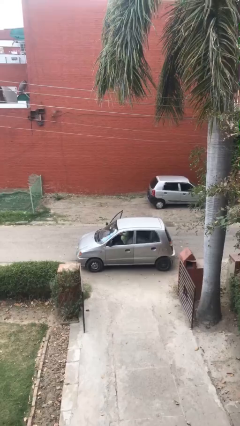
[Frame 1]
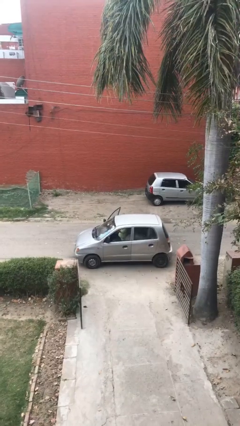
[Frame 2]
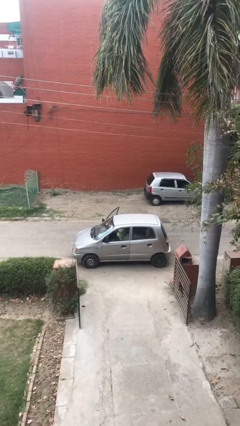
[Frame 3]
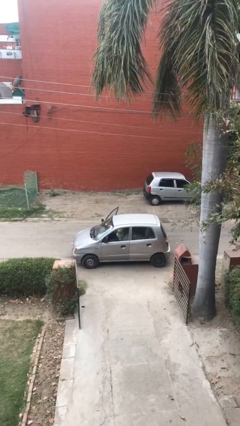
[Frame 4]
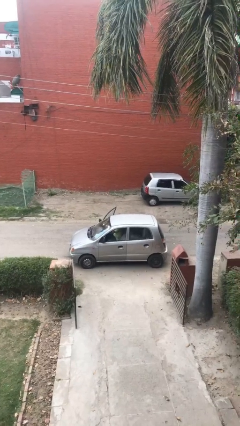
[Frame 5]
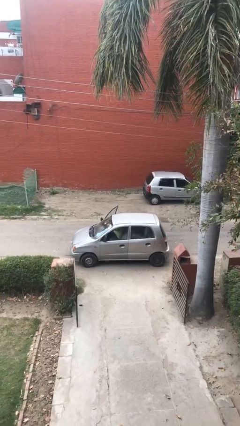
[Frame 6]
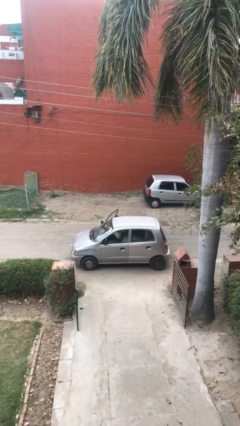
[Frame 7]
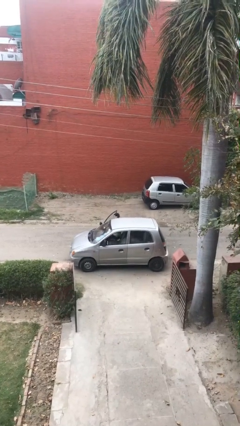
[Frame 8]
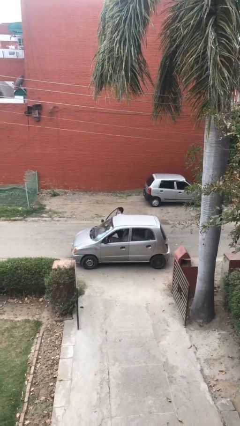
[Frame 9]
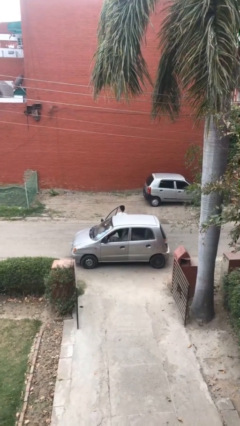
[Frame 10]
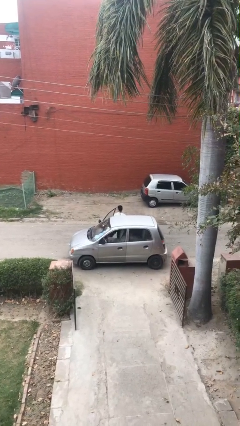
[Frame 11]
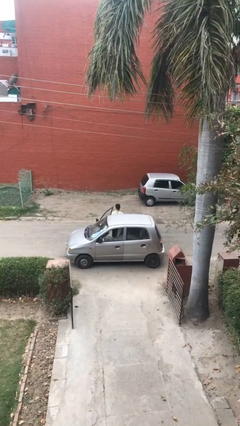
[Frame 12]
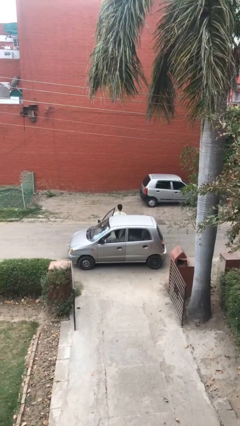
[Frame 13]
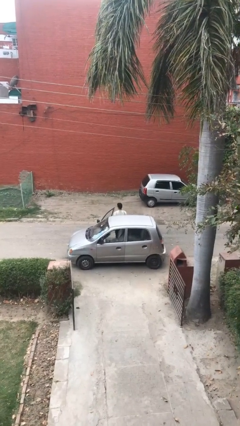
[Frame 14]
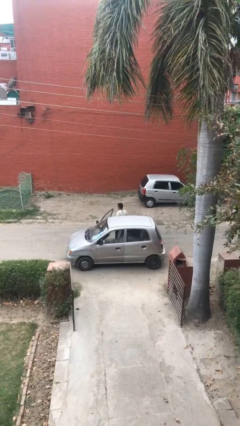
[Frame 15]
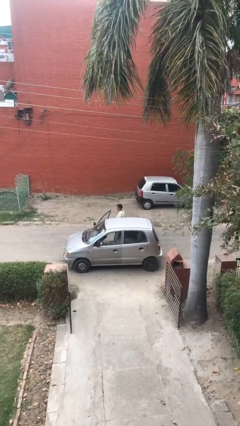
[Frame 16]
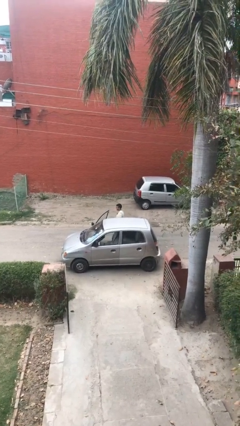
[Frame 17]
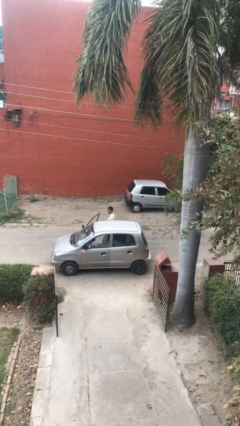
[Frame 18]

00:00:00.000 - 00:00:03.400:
person exits car

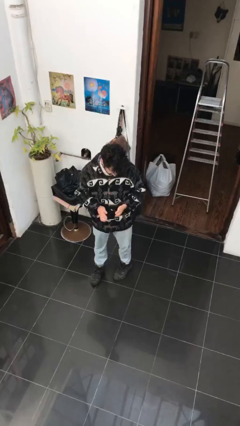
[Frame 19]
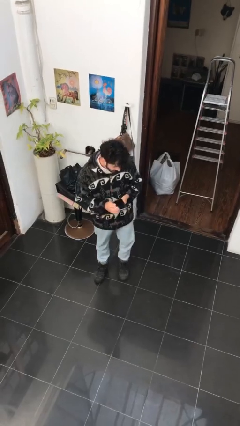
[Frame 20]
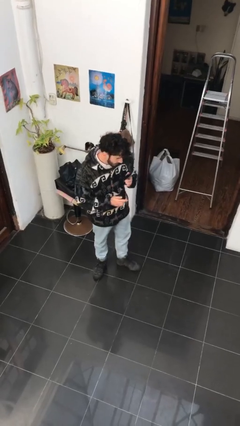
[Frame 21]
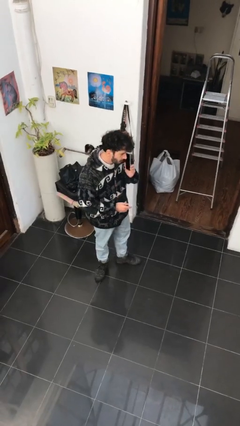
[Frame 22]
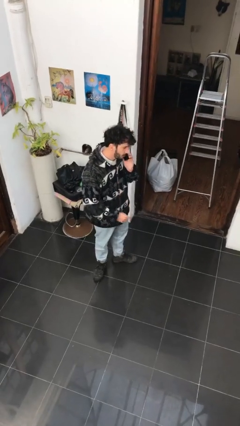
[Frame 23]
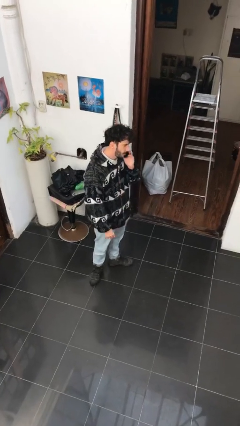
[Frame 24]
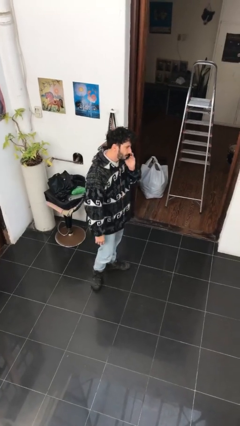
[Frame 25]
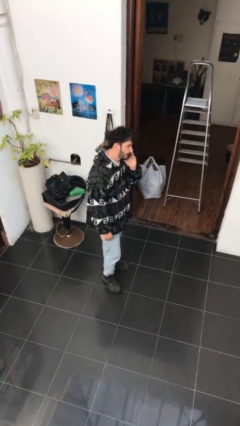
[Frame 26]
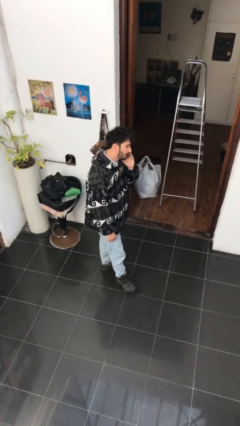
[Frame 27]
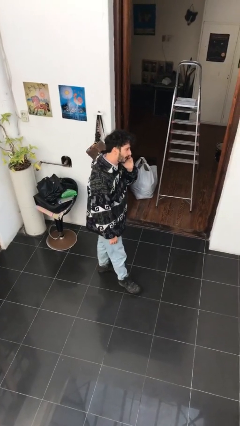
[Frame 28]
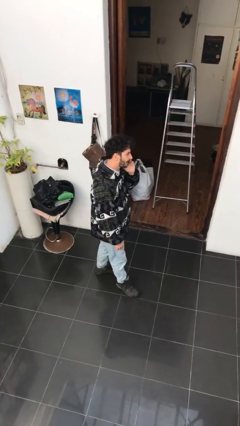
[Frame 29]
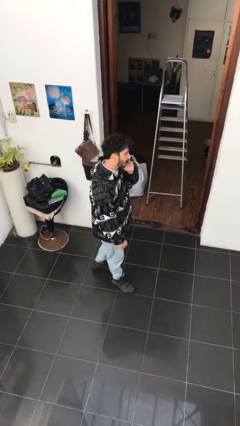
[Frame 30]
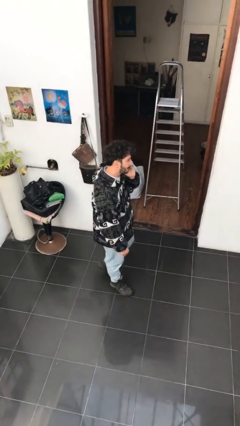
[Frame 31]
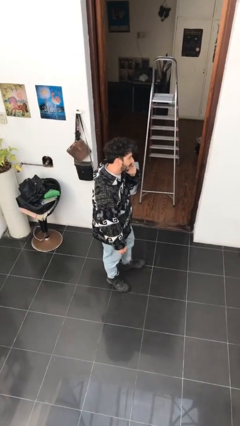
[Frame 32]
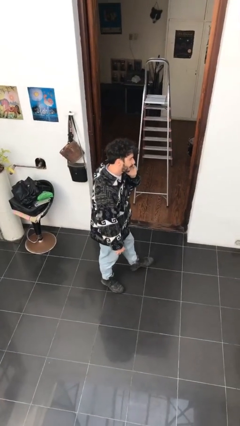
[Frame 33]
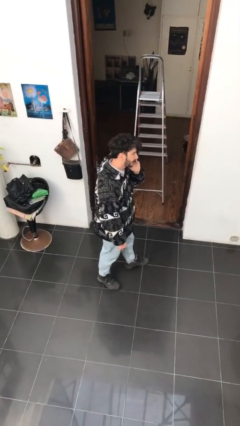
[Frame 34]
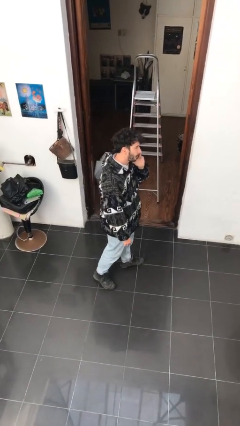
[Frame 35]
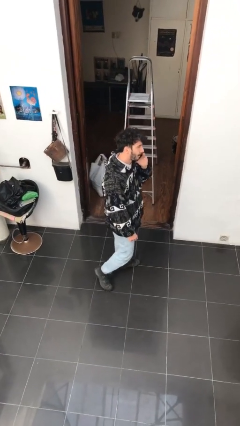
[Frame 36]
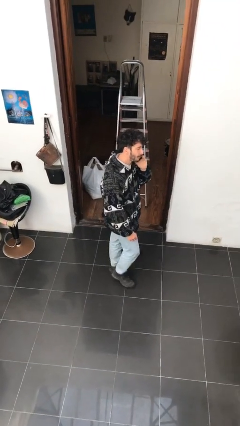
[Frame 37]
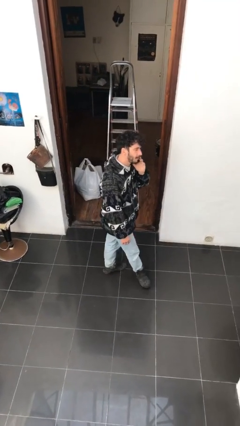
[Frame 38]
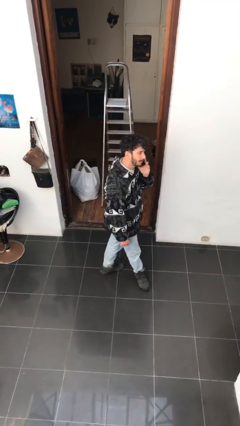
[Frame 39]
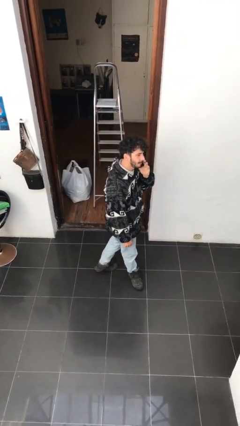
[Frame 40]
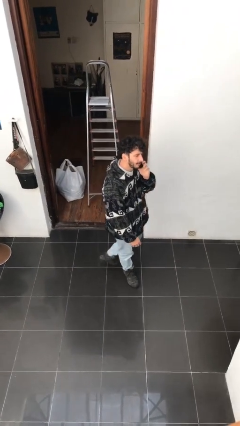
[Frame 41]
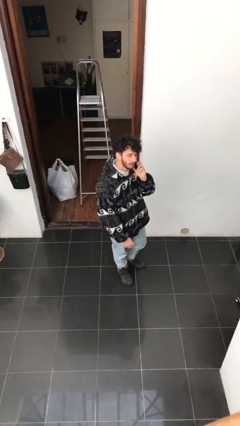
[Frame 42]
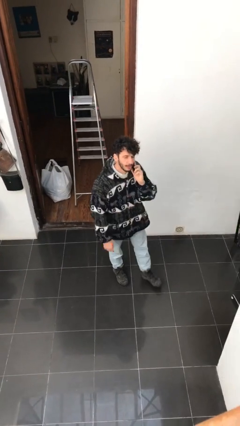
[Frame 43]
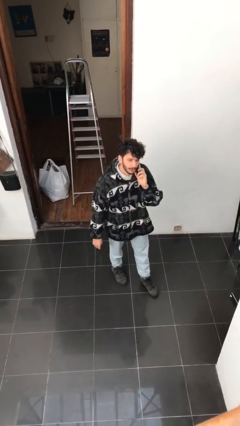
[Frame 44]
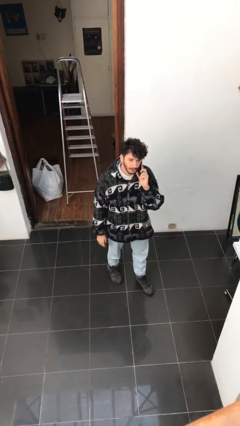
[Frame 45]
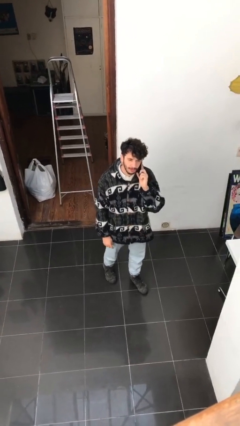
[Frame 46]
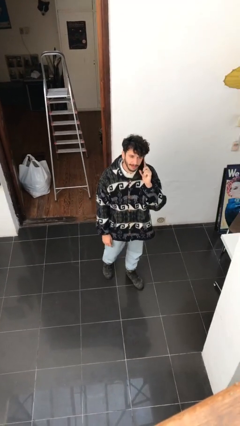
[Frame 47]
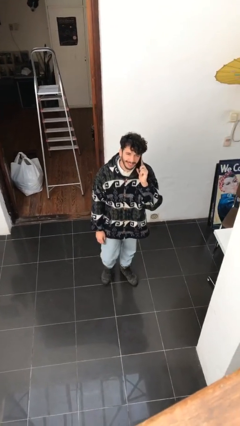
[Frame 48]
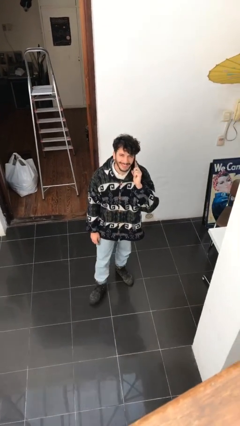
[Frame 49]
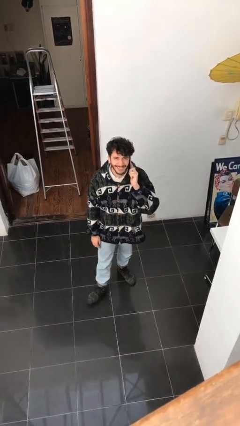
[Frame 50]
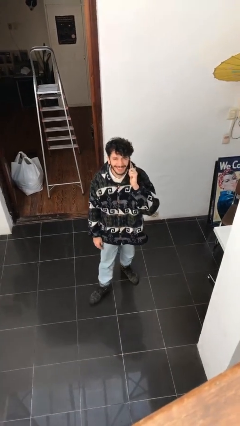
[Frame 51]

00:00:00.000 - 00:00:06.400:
person talks on phone

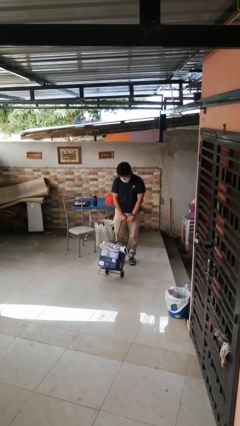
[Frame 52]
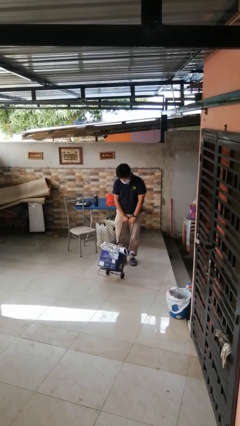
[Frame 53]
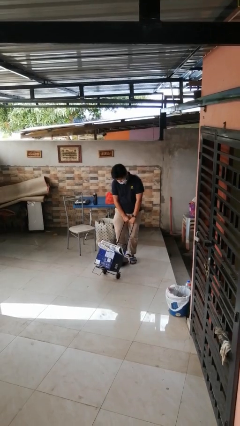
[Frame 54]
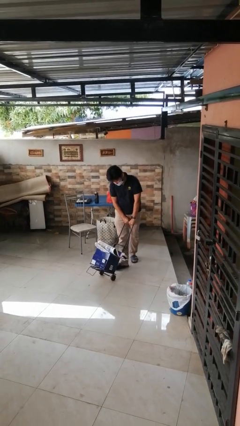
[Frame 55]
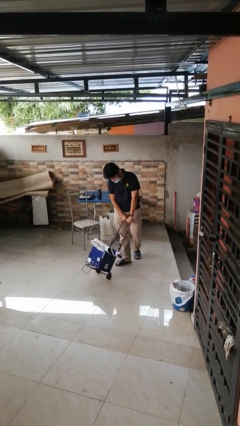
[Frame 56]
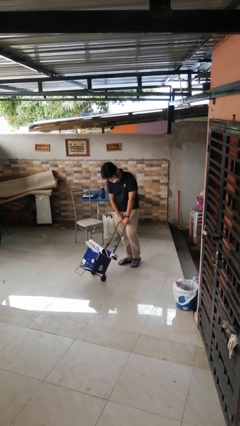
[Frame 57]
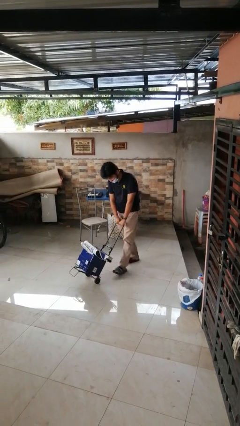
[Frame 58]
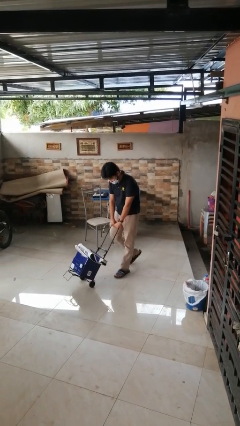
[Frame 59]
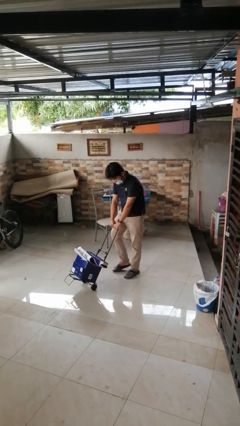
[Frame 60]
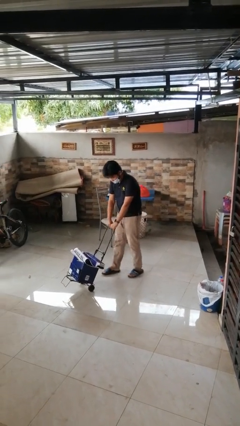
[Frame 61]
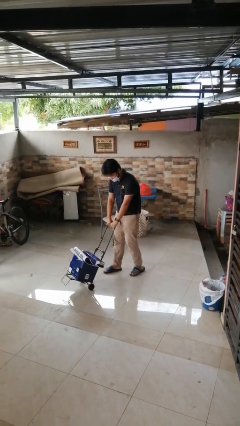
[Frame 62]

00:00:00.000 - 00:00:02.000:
person pushes wheeled cart

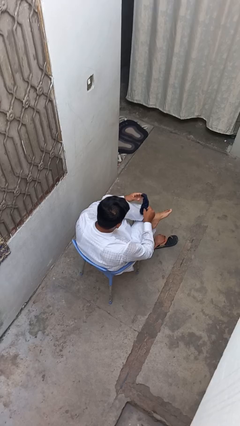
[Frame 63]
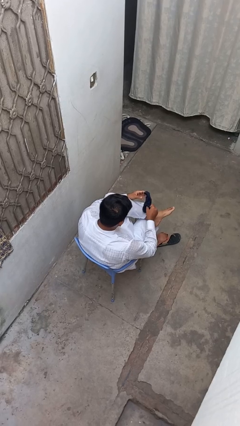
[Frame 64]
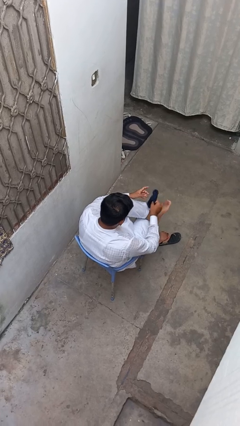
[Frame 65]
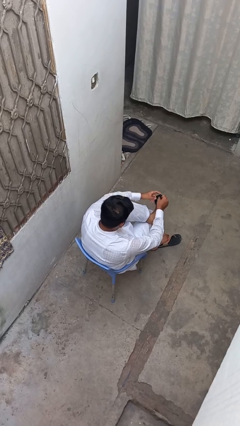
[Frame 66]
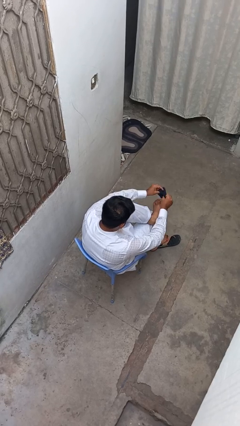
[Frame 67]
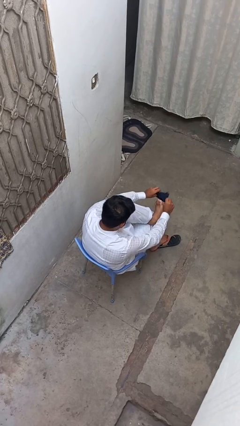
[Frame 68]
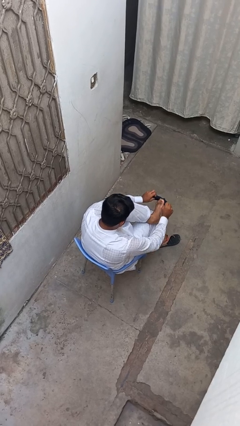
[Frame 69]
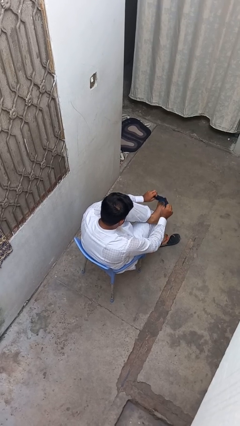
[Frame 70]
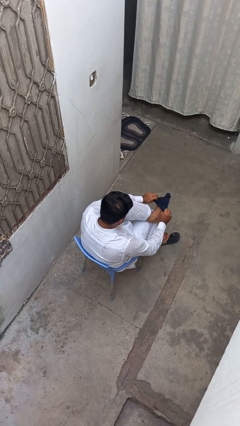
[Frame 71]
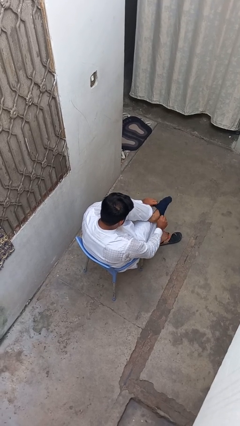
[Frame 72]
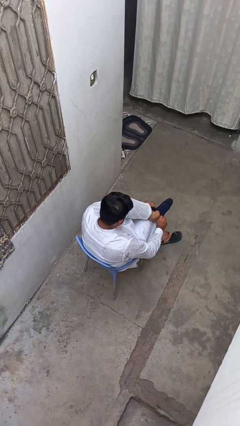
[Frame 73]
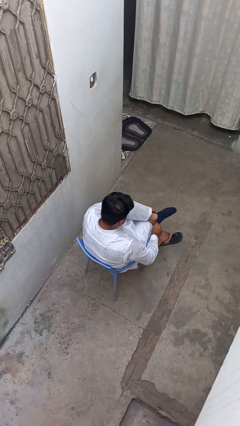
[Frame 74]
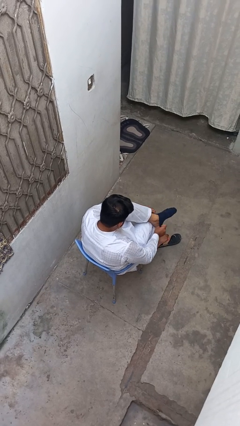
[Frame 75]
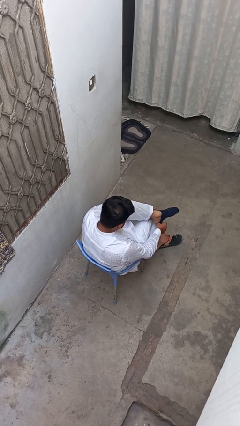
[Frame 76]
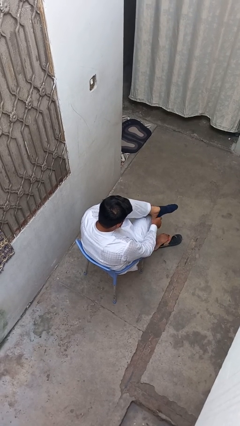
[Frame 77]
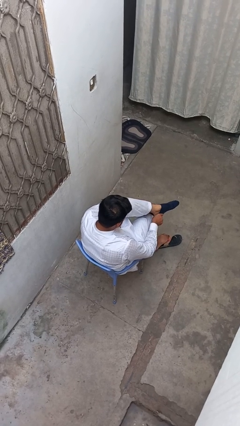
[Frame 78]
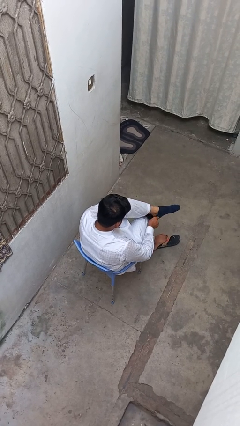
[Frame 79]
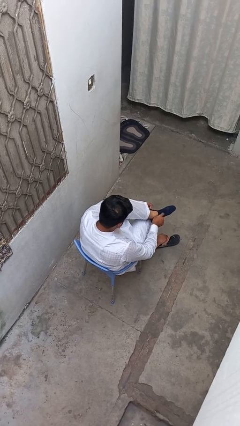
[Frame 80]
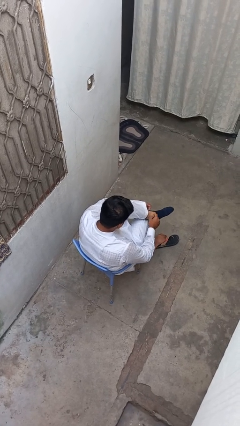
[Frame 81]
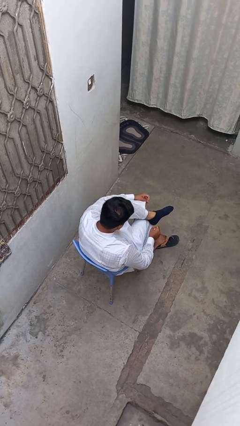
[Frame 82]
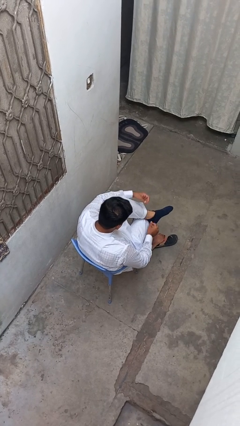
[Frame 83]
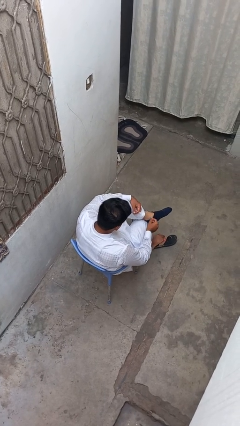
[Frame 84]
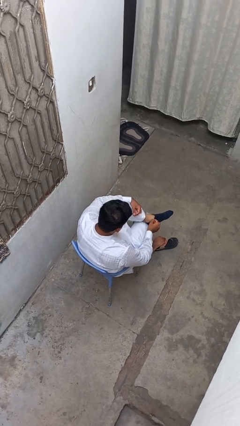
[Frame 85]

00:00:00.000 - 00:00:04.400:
person puts on socks

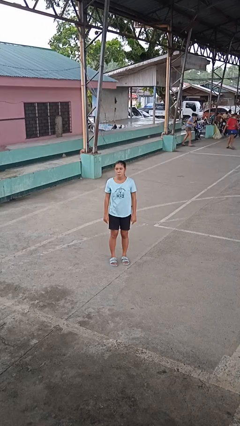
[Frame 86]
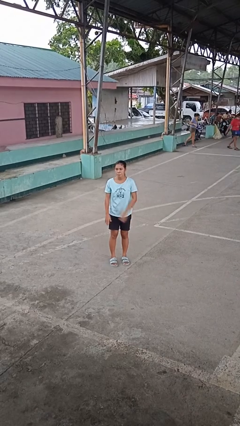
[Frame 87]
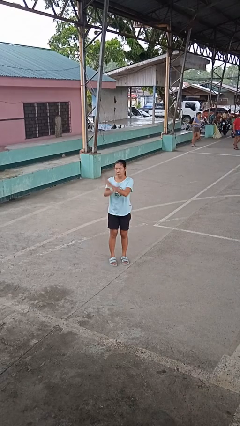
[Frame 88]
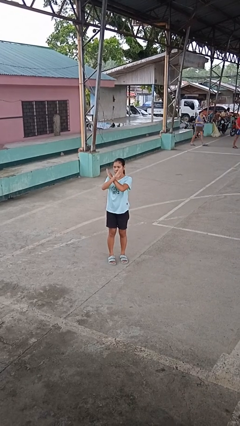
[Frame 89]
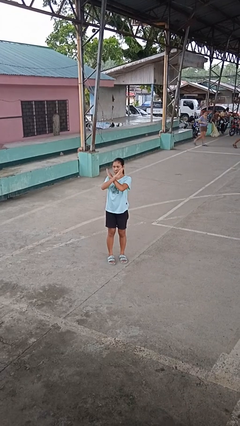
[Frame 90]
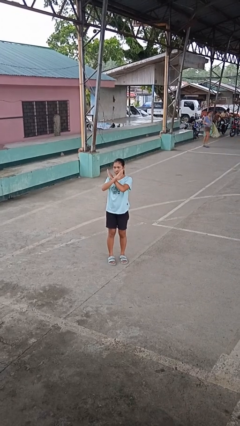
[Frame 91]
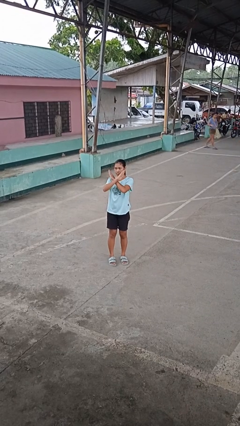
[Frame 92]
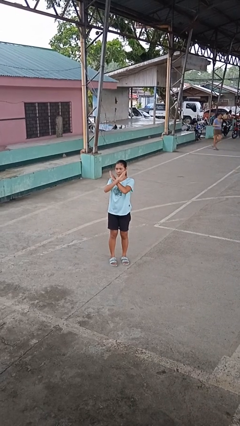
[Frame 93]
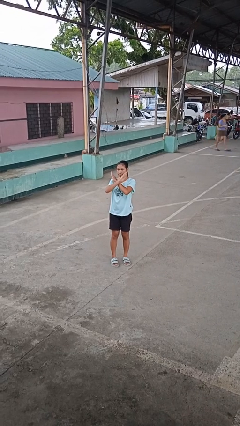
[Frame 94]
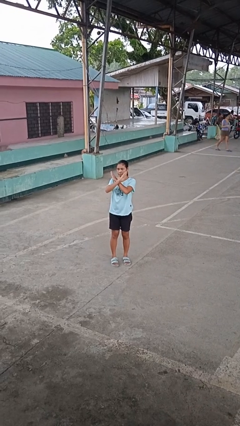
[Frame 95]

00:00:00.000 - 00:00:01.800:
person gestures arms x
